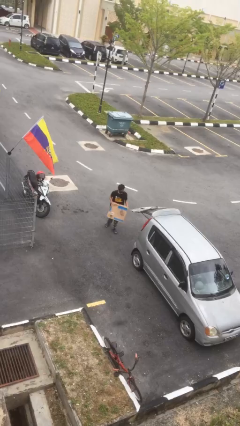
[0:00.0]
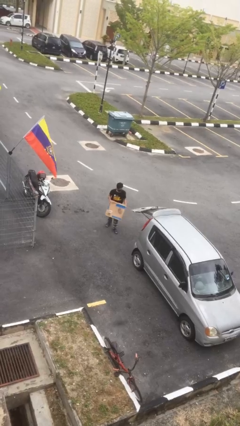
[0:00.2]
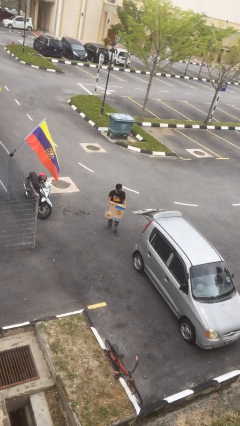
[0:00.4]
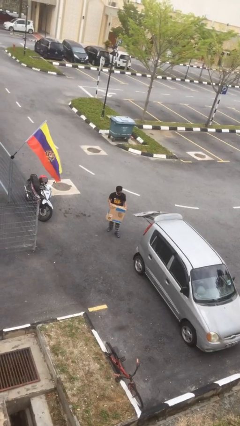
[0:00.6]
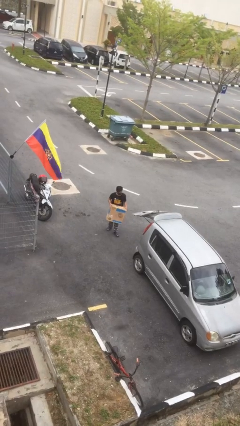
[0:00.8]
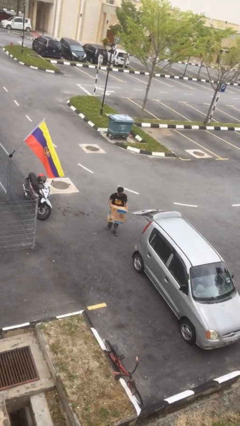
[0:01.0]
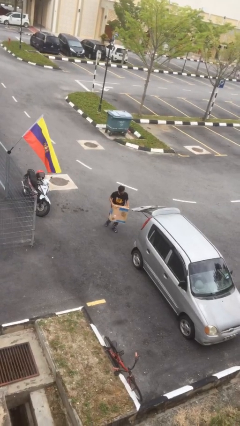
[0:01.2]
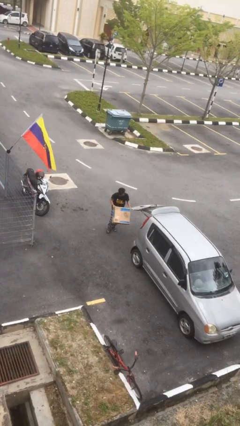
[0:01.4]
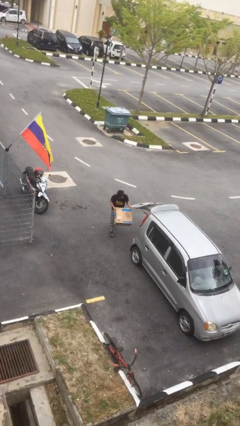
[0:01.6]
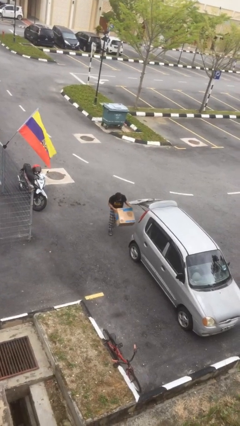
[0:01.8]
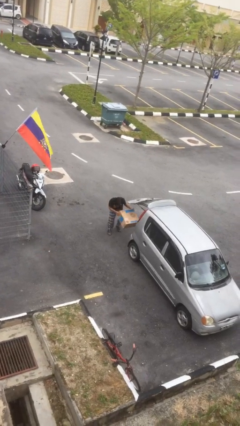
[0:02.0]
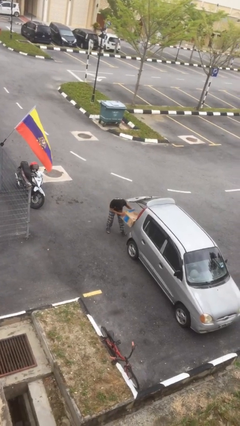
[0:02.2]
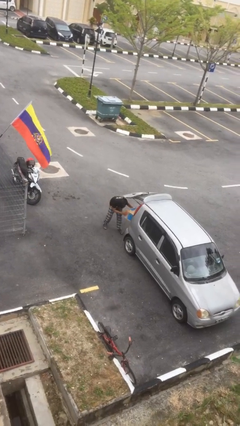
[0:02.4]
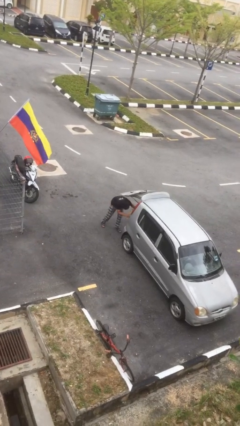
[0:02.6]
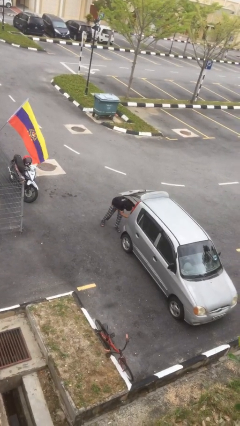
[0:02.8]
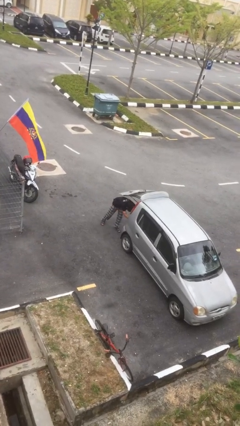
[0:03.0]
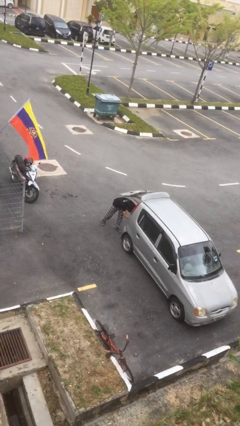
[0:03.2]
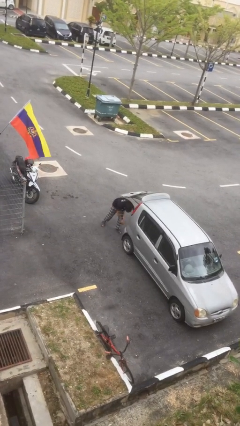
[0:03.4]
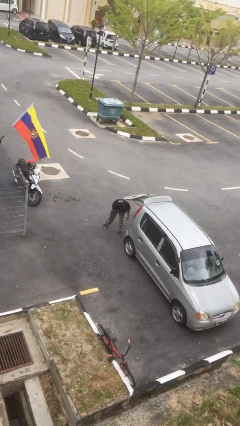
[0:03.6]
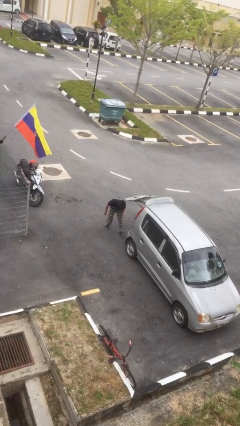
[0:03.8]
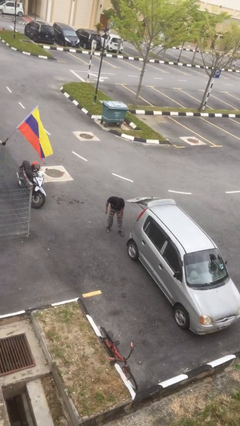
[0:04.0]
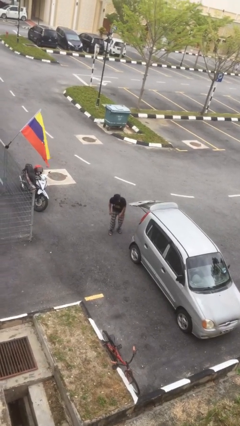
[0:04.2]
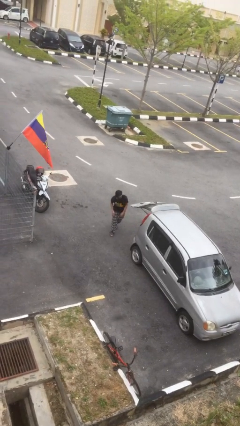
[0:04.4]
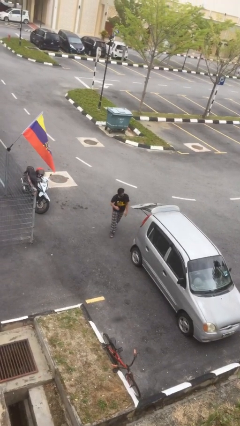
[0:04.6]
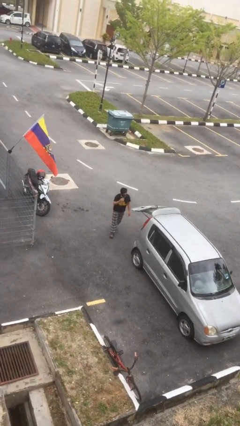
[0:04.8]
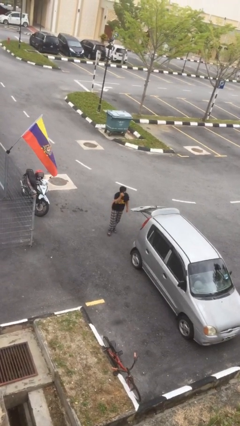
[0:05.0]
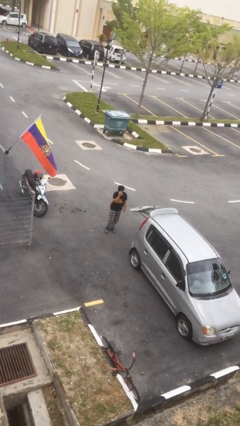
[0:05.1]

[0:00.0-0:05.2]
person loads car

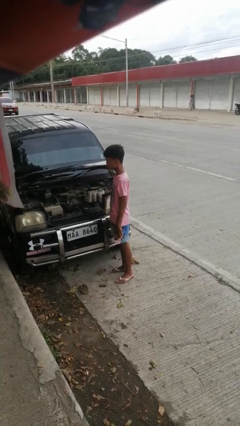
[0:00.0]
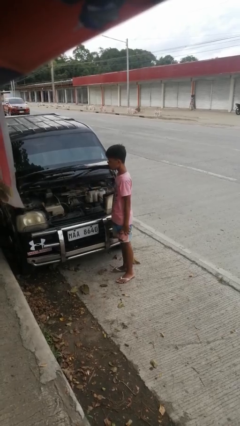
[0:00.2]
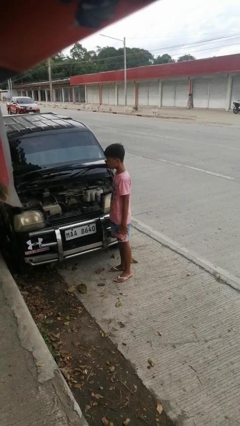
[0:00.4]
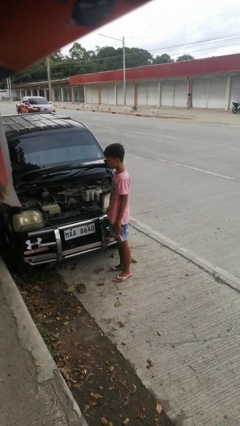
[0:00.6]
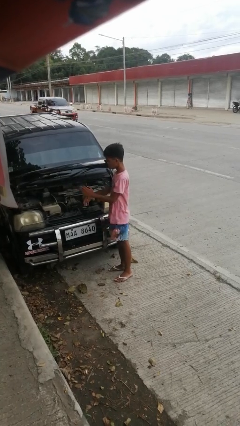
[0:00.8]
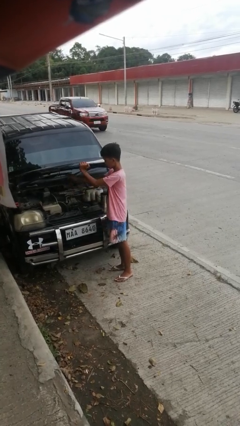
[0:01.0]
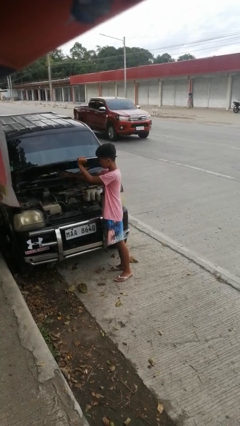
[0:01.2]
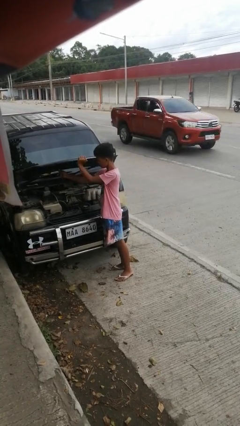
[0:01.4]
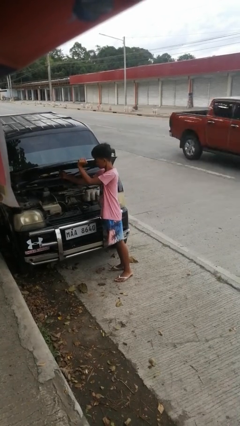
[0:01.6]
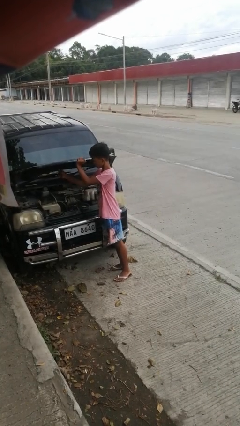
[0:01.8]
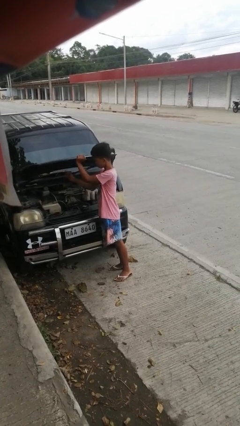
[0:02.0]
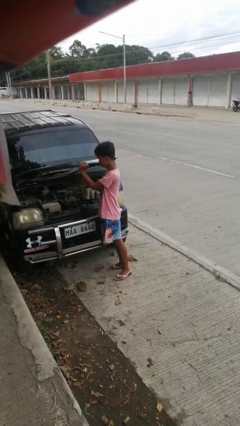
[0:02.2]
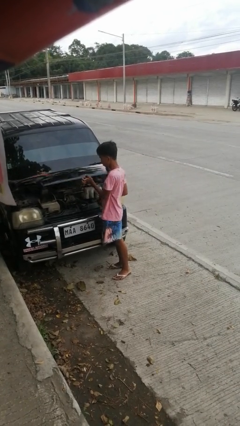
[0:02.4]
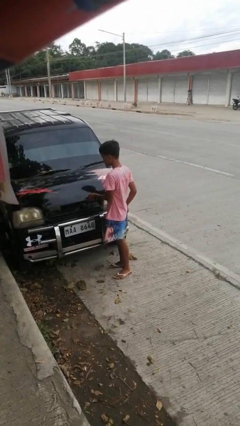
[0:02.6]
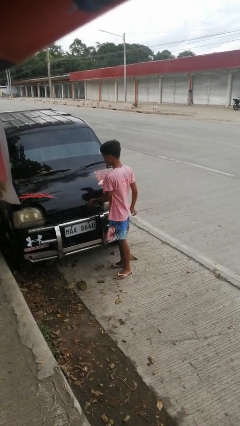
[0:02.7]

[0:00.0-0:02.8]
person closes car hood

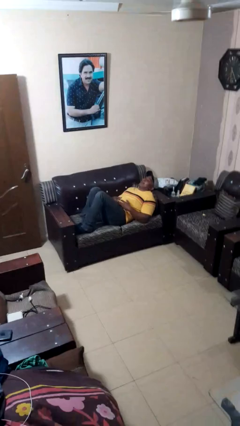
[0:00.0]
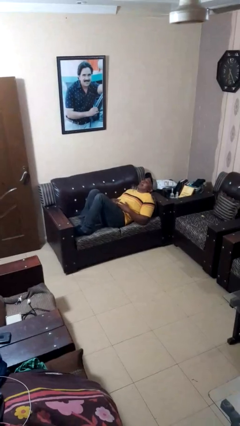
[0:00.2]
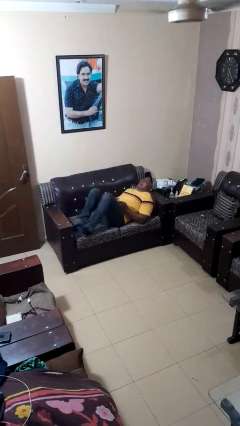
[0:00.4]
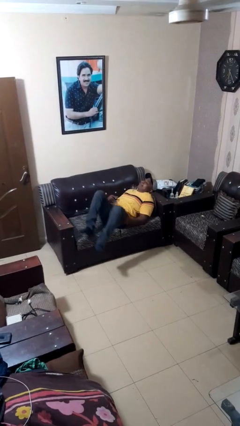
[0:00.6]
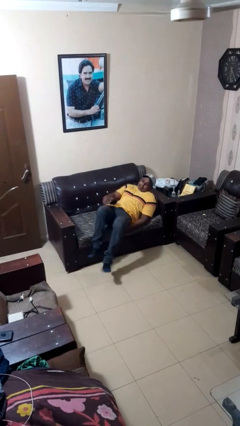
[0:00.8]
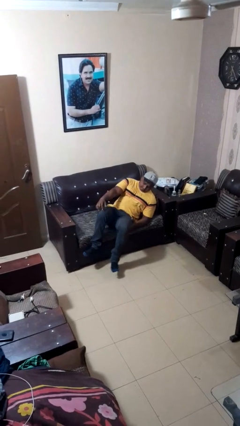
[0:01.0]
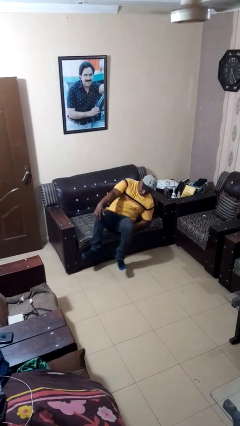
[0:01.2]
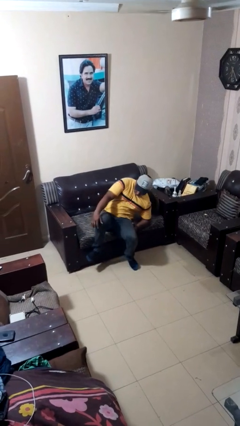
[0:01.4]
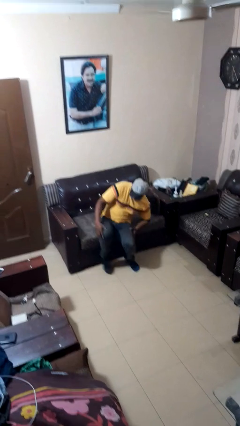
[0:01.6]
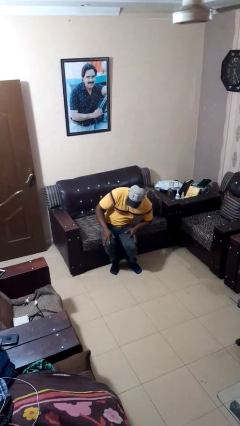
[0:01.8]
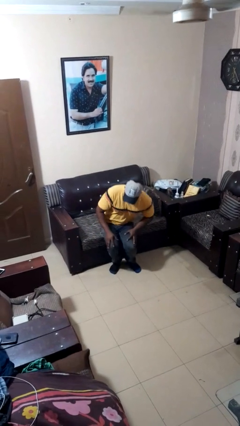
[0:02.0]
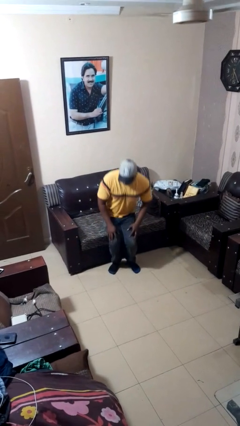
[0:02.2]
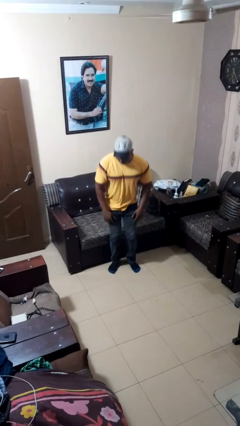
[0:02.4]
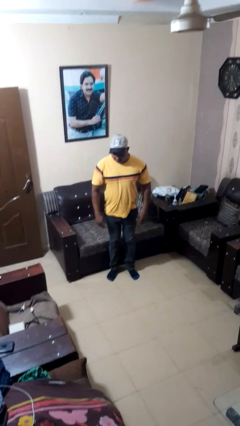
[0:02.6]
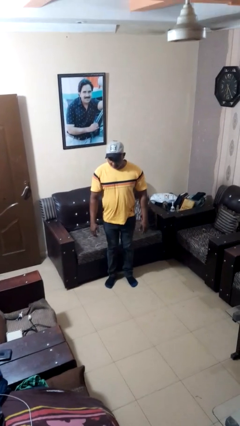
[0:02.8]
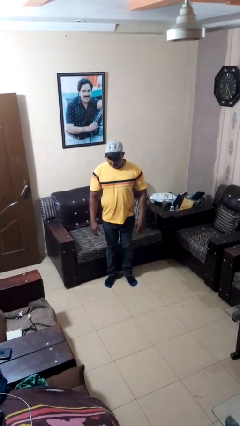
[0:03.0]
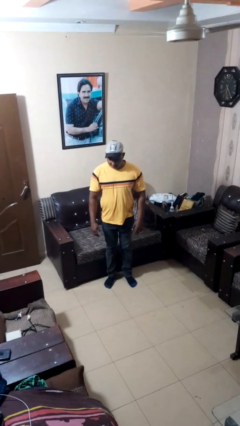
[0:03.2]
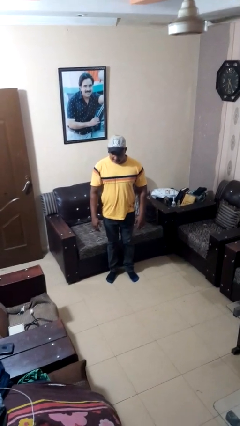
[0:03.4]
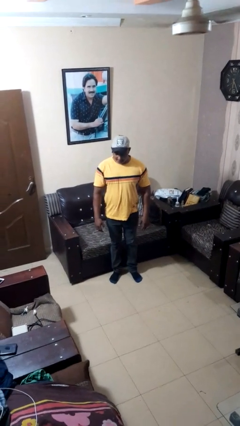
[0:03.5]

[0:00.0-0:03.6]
person stands up

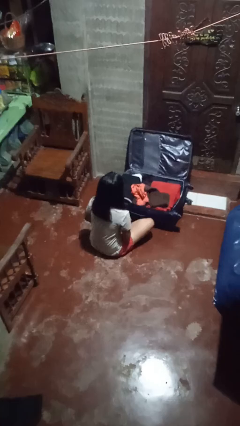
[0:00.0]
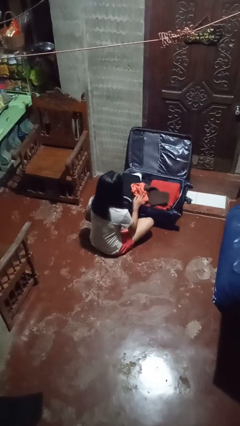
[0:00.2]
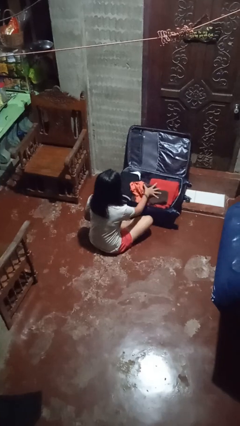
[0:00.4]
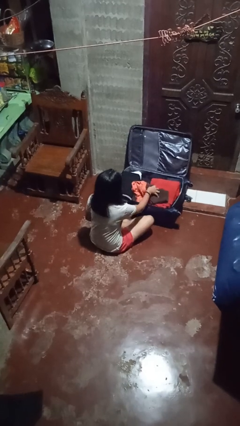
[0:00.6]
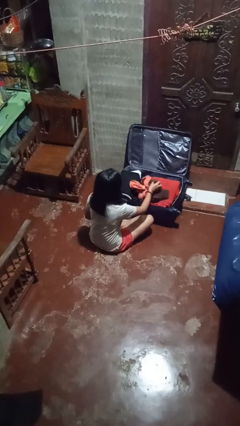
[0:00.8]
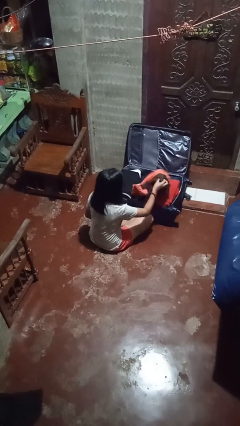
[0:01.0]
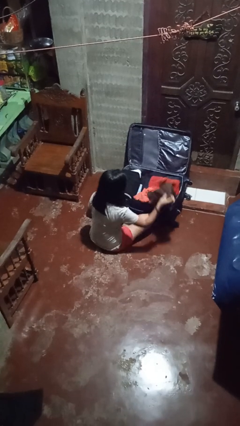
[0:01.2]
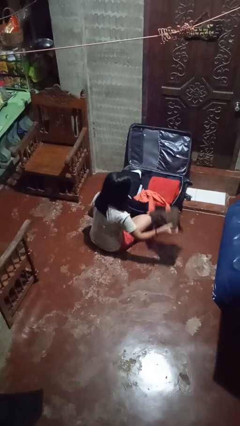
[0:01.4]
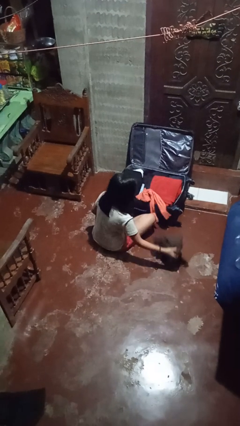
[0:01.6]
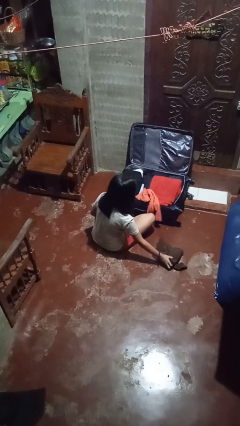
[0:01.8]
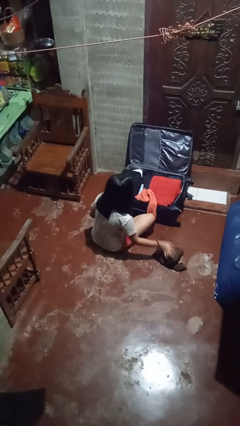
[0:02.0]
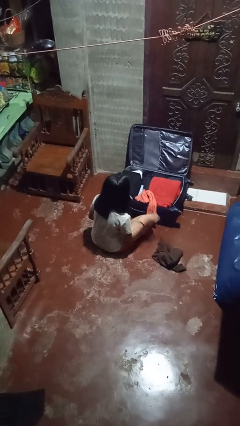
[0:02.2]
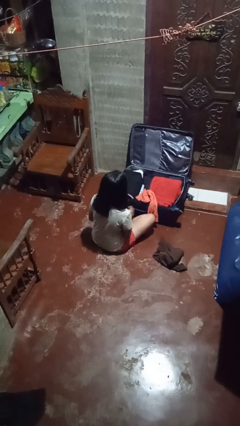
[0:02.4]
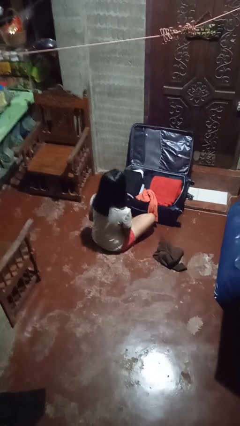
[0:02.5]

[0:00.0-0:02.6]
person unloads clothes from suitcase

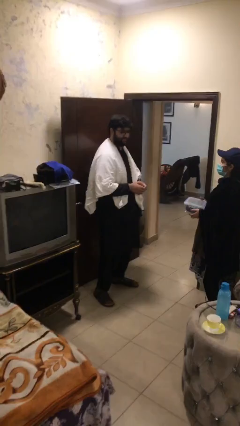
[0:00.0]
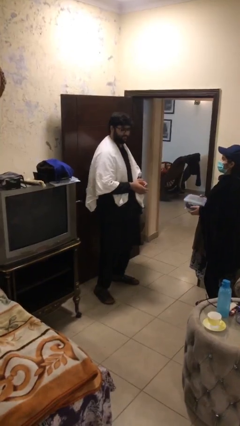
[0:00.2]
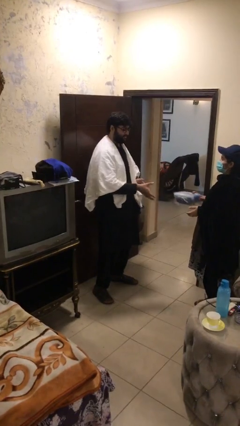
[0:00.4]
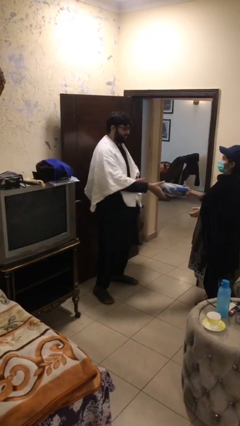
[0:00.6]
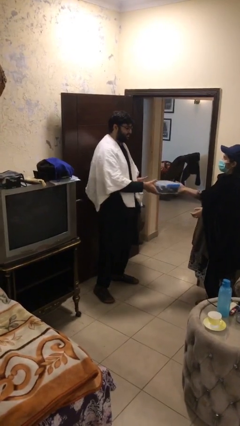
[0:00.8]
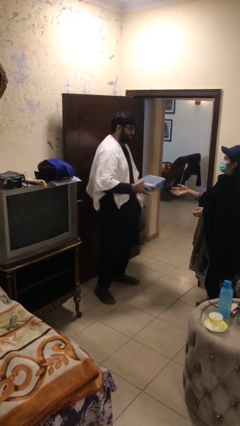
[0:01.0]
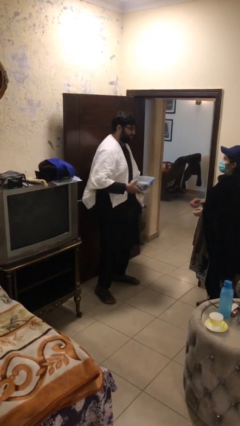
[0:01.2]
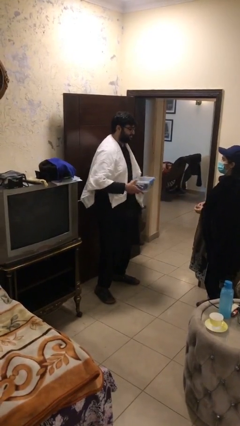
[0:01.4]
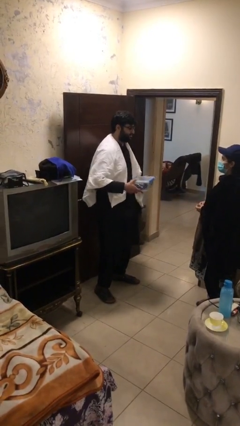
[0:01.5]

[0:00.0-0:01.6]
person transfers object to person

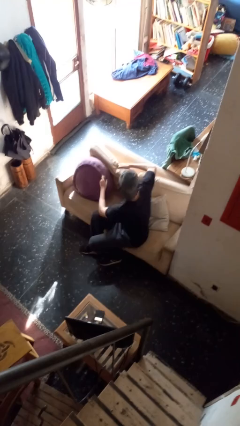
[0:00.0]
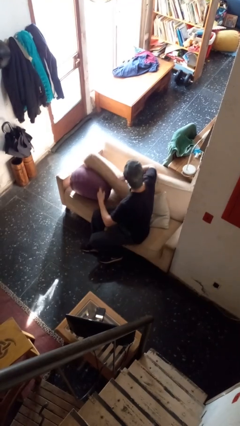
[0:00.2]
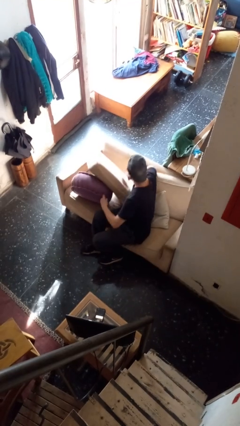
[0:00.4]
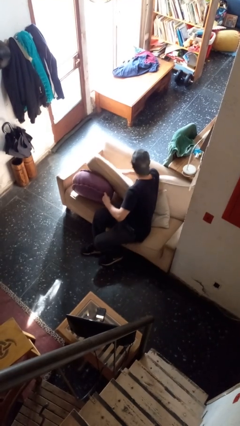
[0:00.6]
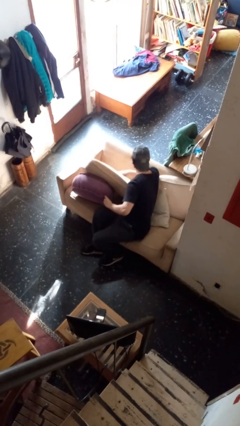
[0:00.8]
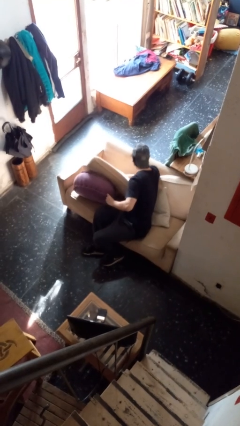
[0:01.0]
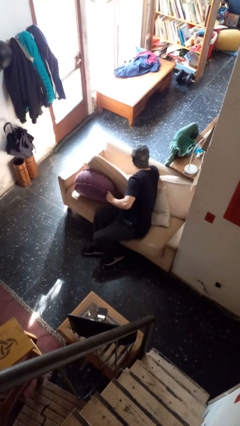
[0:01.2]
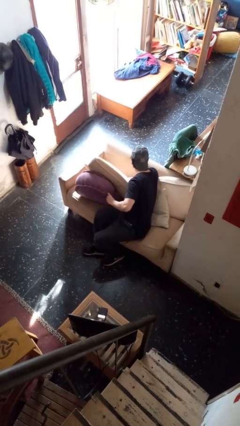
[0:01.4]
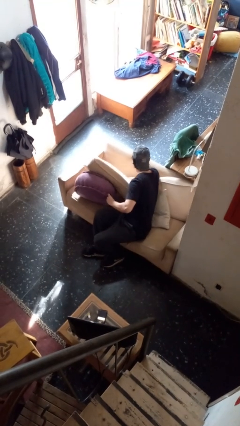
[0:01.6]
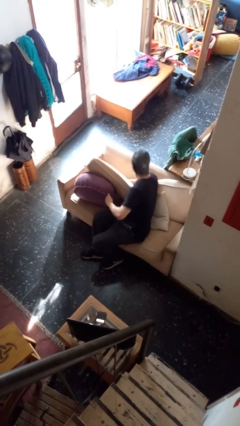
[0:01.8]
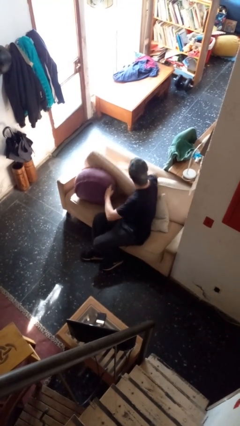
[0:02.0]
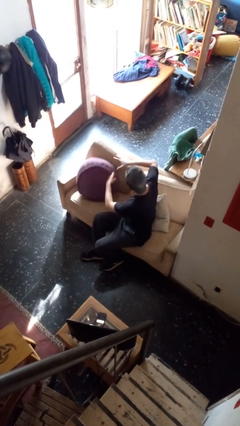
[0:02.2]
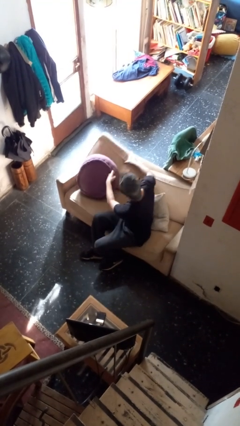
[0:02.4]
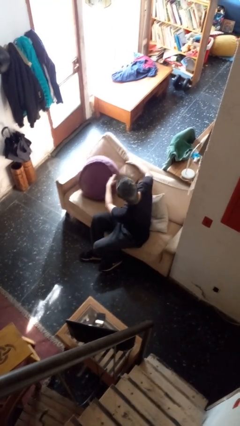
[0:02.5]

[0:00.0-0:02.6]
person searches in couch
